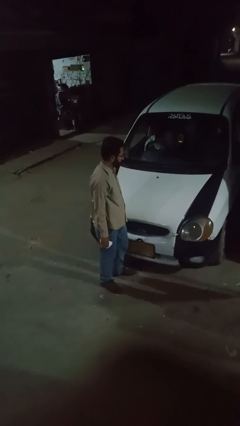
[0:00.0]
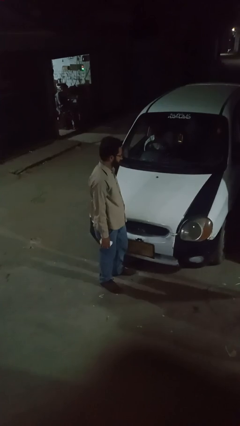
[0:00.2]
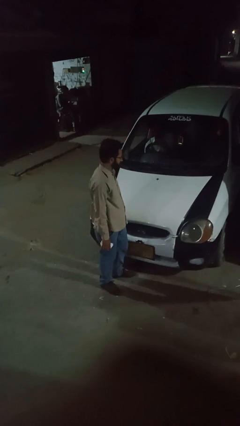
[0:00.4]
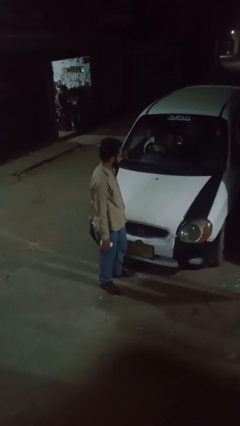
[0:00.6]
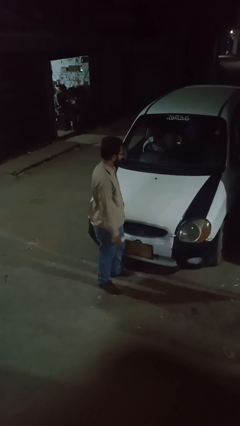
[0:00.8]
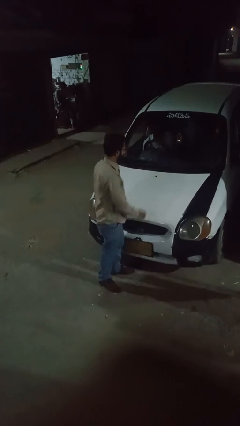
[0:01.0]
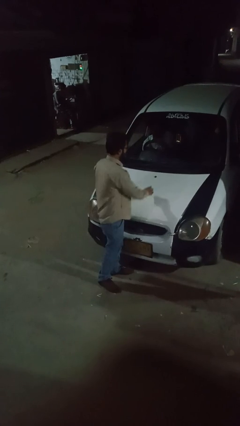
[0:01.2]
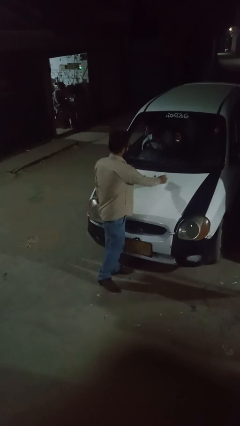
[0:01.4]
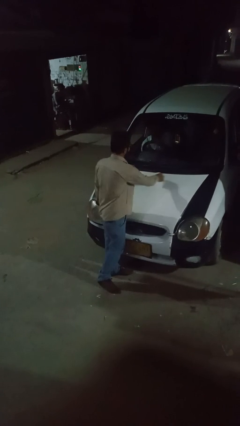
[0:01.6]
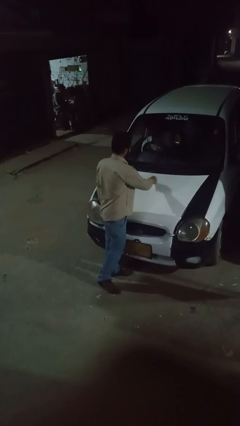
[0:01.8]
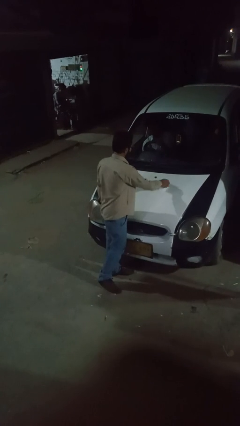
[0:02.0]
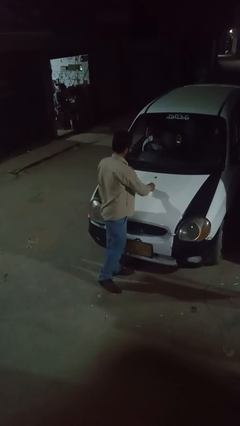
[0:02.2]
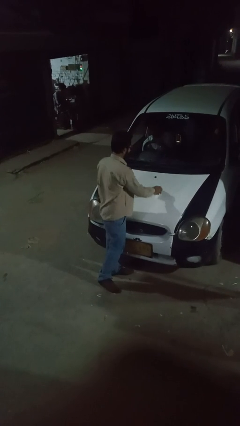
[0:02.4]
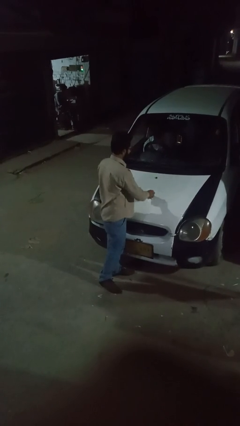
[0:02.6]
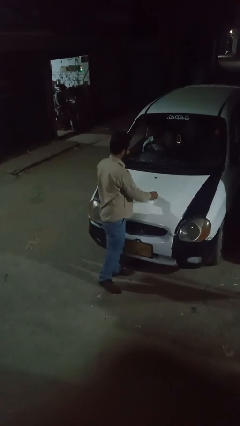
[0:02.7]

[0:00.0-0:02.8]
person polishes car with rag

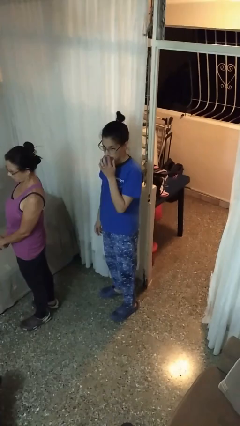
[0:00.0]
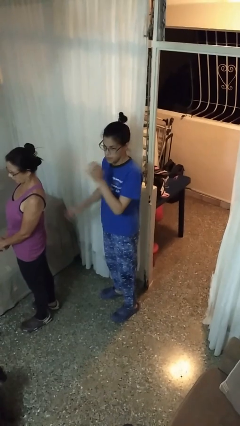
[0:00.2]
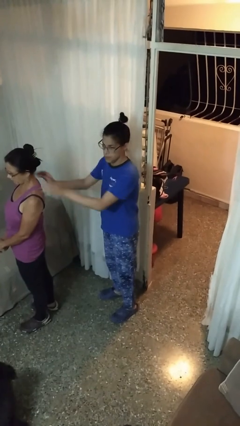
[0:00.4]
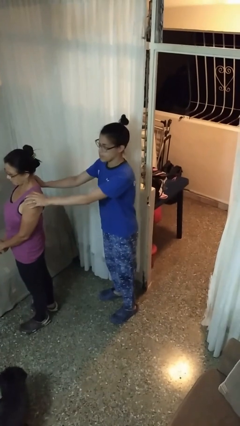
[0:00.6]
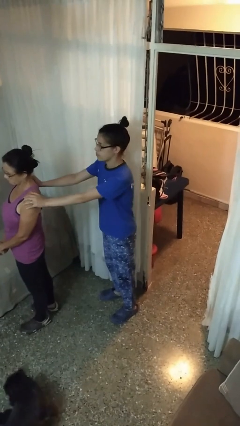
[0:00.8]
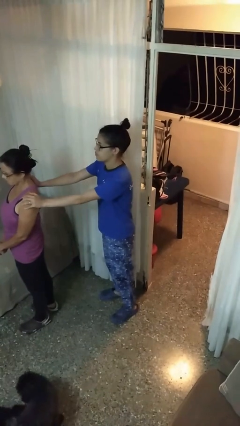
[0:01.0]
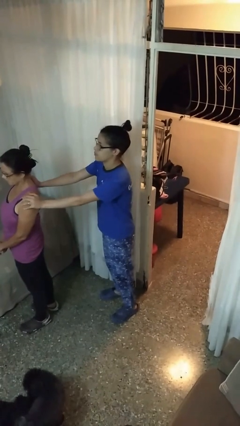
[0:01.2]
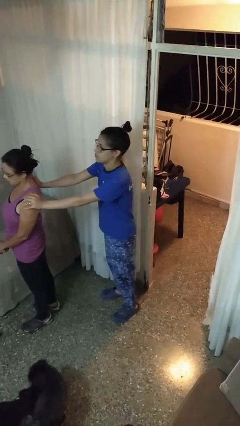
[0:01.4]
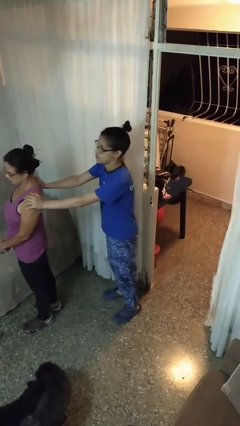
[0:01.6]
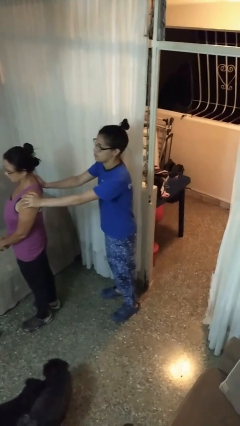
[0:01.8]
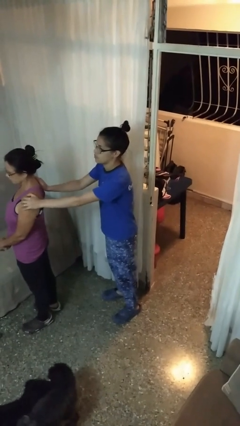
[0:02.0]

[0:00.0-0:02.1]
person grabs person by shoulder

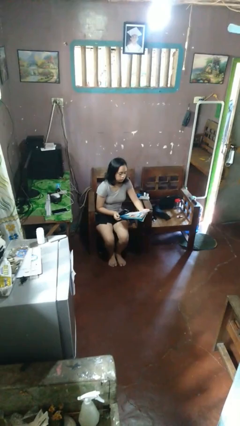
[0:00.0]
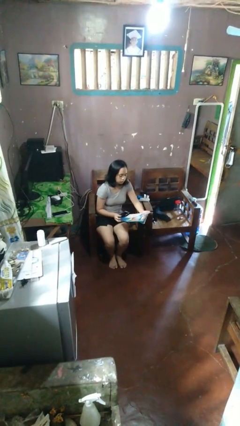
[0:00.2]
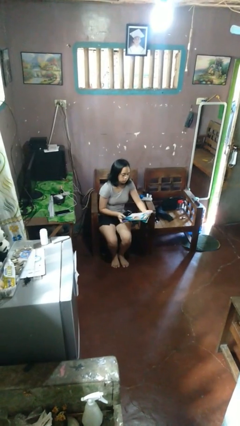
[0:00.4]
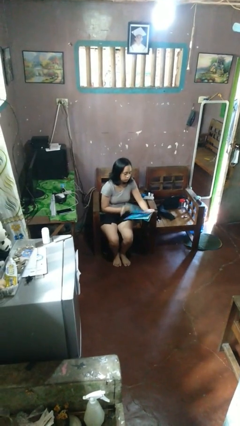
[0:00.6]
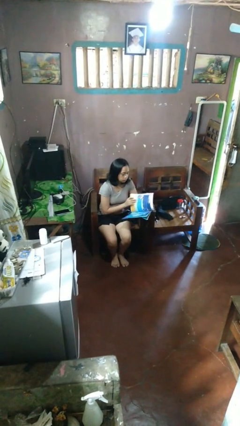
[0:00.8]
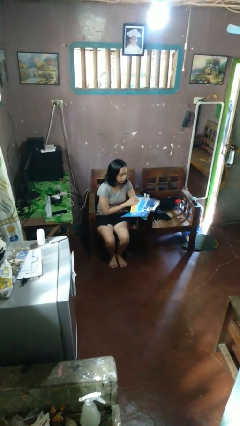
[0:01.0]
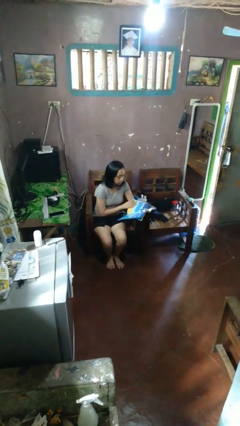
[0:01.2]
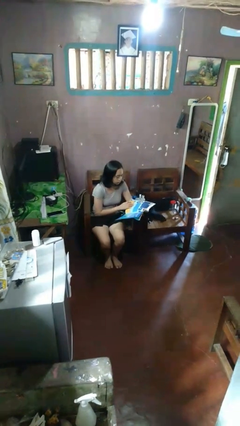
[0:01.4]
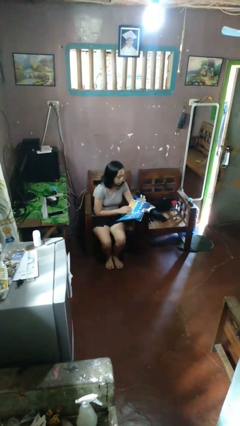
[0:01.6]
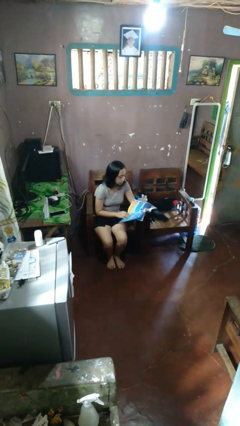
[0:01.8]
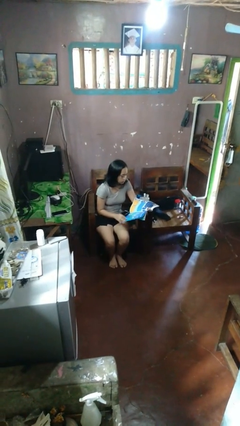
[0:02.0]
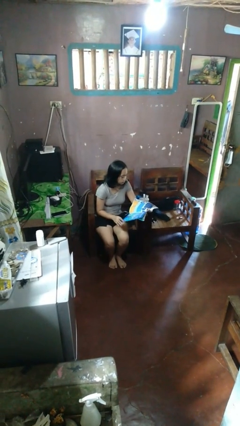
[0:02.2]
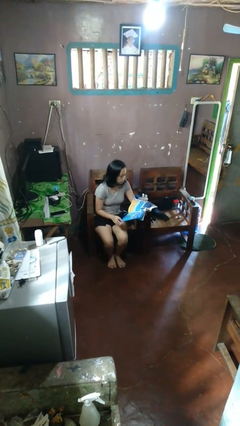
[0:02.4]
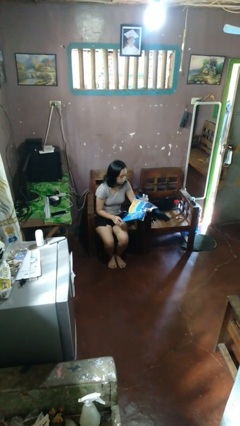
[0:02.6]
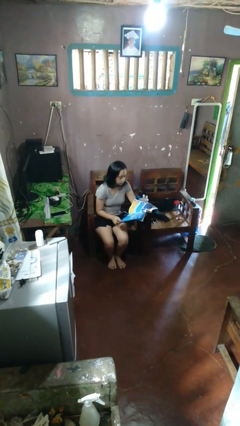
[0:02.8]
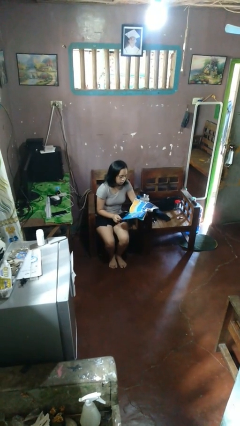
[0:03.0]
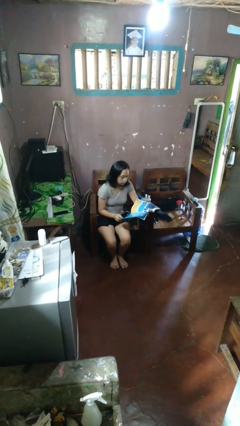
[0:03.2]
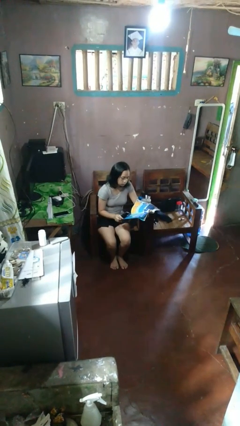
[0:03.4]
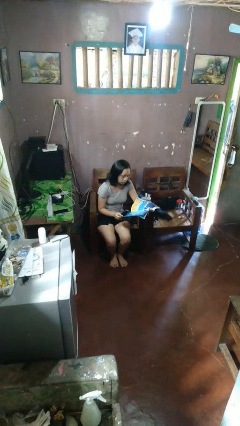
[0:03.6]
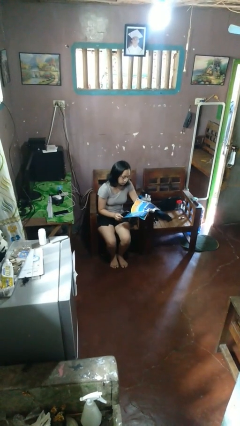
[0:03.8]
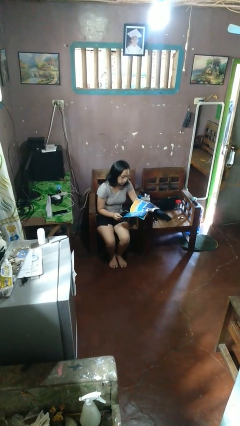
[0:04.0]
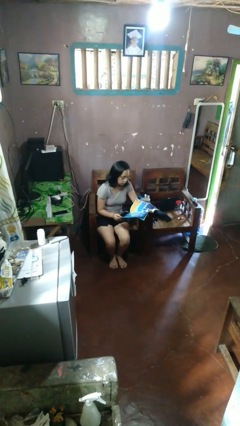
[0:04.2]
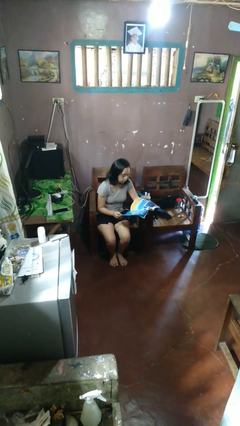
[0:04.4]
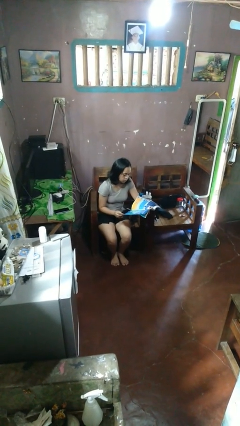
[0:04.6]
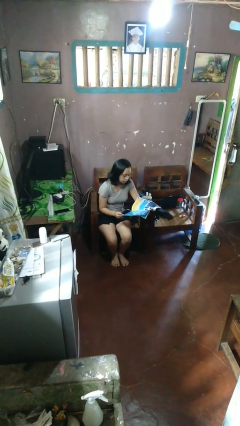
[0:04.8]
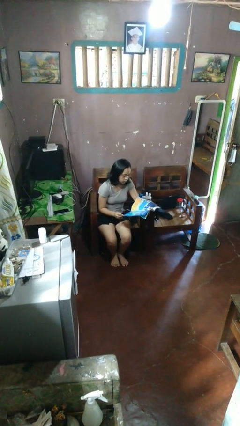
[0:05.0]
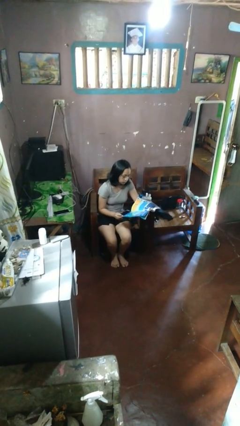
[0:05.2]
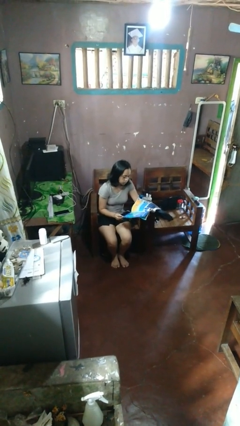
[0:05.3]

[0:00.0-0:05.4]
person reads magazine

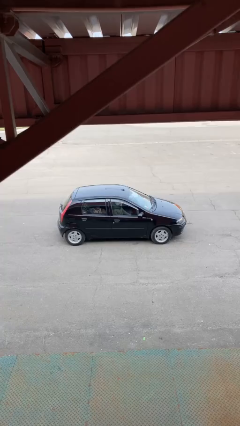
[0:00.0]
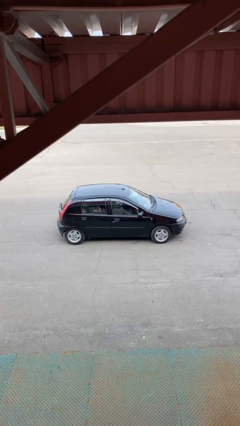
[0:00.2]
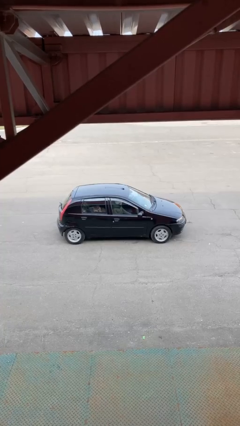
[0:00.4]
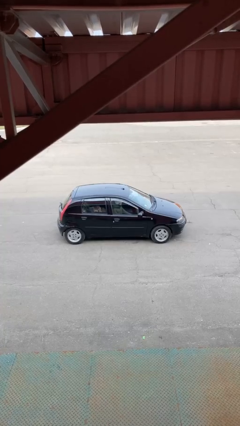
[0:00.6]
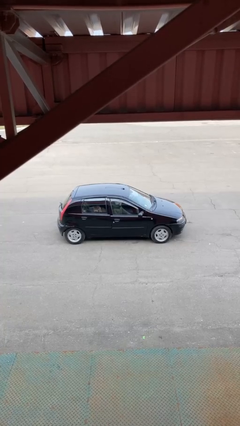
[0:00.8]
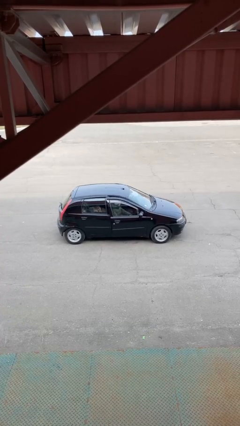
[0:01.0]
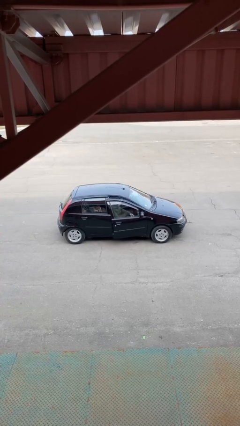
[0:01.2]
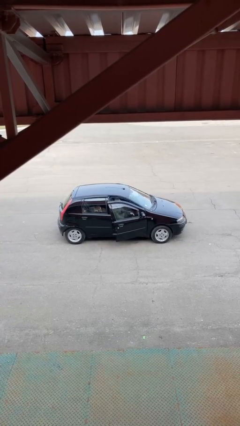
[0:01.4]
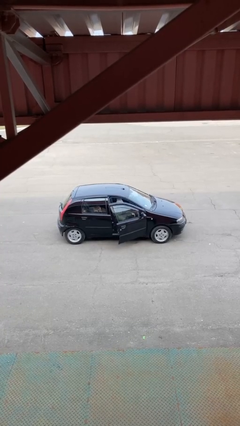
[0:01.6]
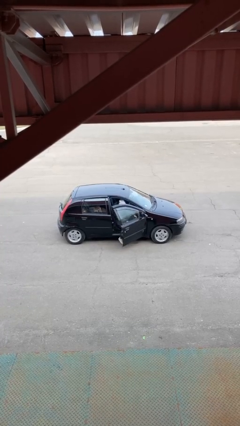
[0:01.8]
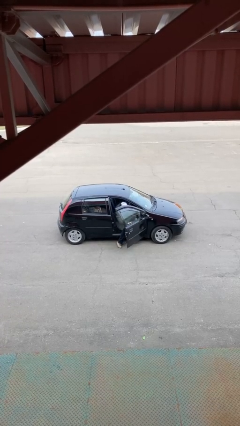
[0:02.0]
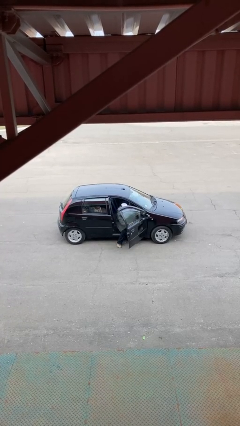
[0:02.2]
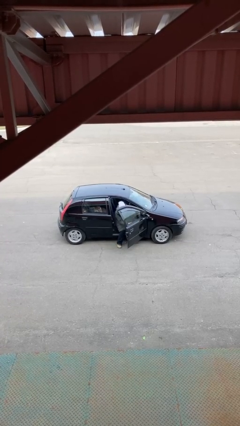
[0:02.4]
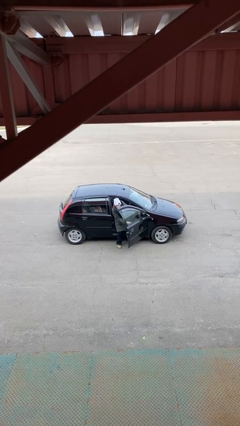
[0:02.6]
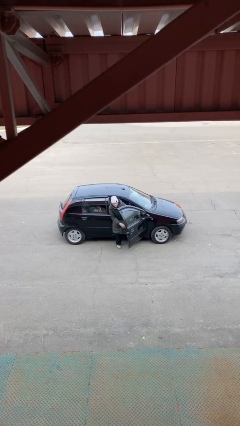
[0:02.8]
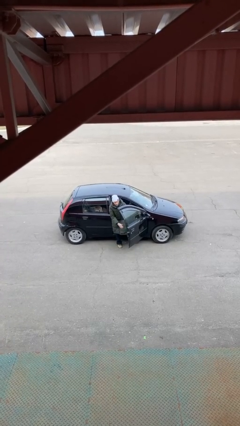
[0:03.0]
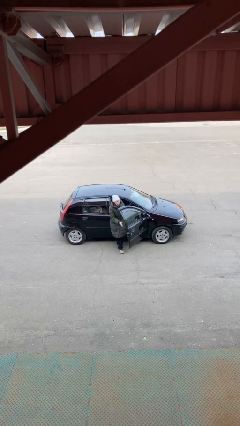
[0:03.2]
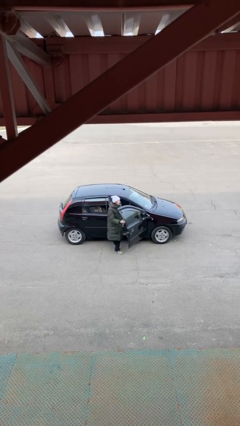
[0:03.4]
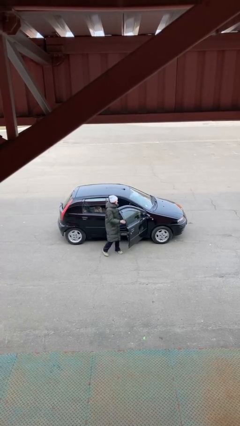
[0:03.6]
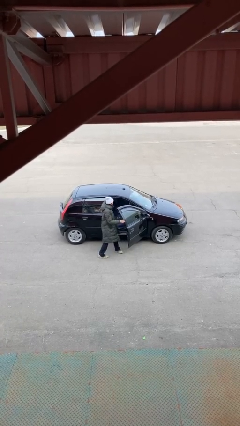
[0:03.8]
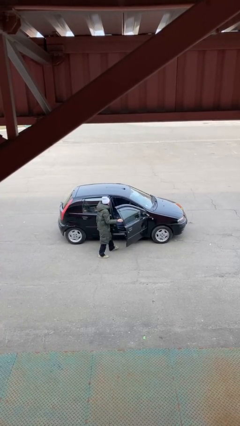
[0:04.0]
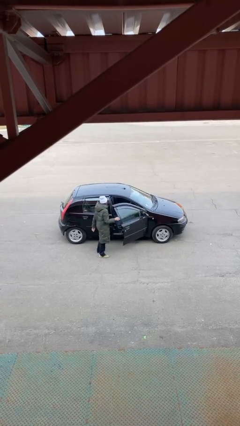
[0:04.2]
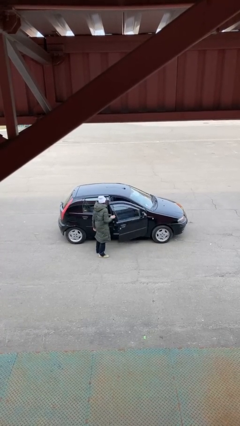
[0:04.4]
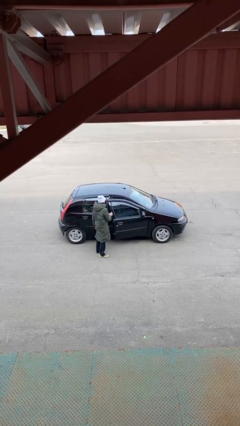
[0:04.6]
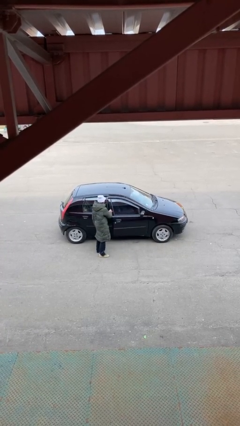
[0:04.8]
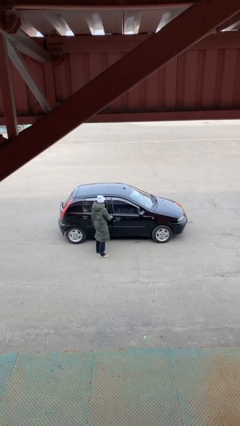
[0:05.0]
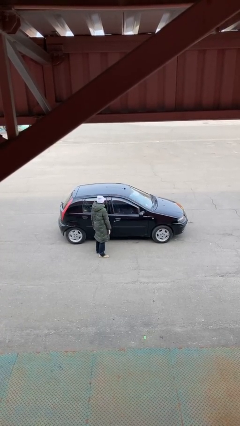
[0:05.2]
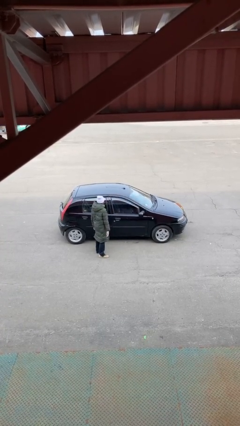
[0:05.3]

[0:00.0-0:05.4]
car drops off person

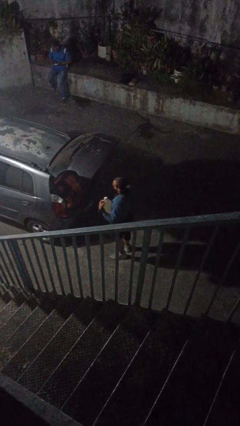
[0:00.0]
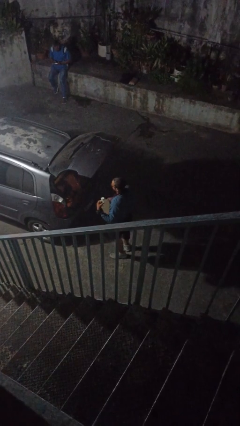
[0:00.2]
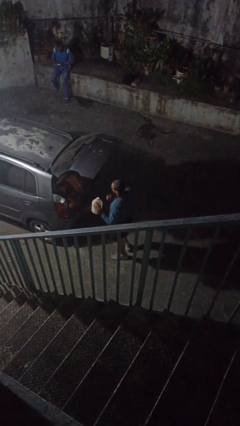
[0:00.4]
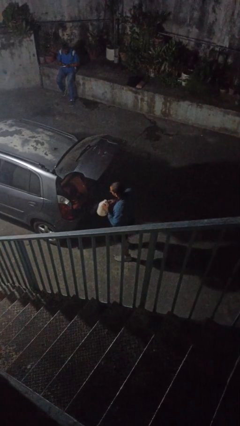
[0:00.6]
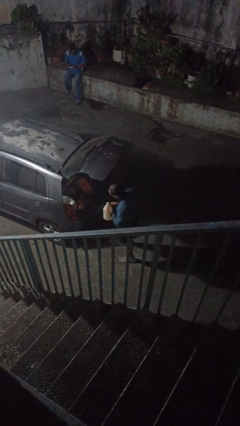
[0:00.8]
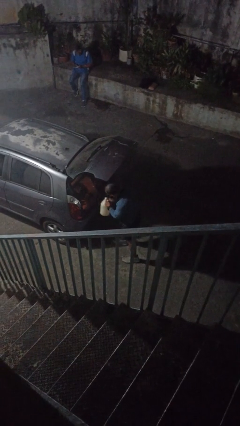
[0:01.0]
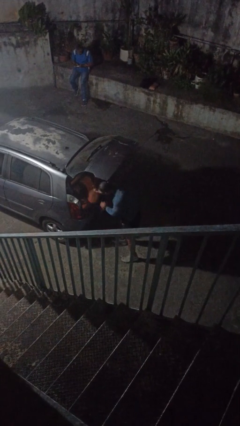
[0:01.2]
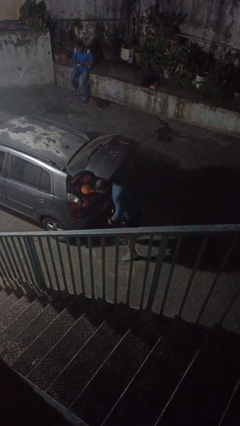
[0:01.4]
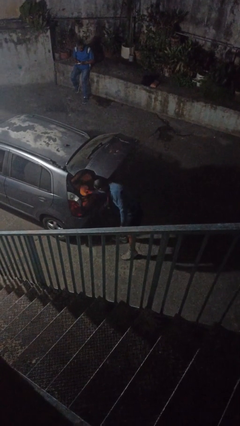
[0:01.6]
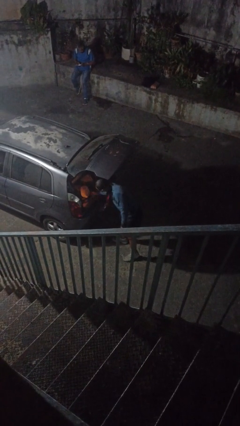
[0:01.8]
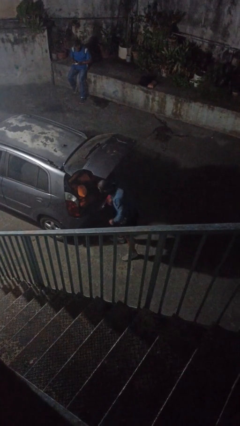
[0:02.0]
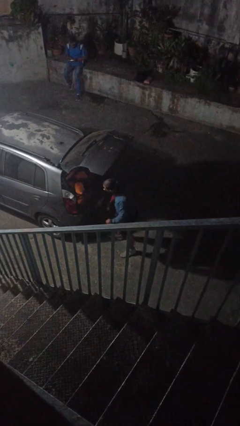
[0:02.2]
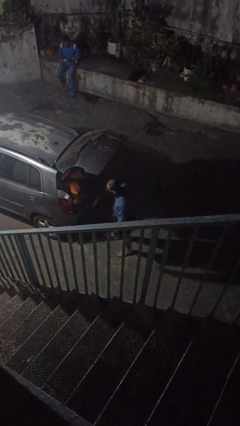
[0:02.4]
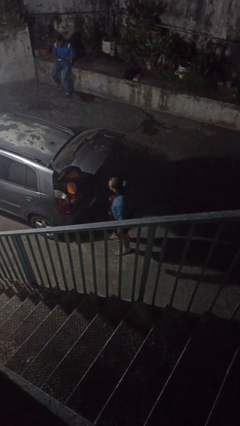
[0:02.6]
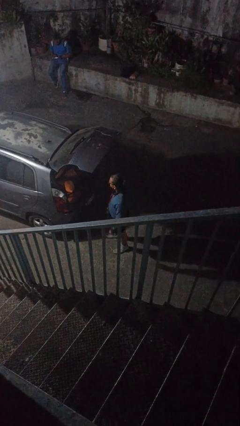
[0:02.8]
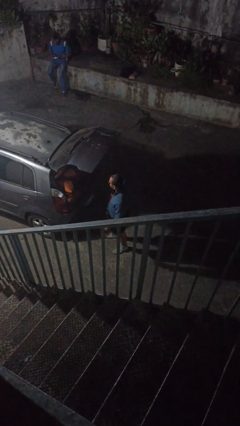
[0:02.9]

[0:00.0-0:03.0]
person loads car
